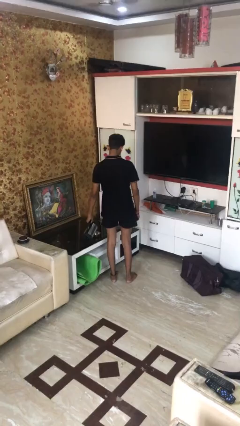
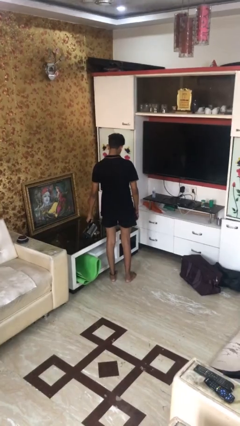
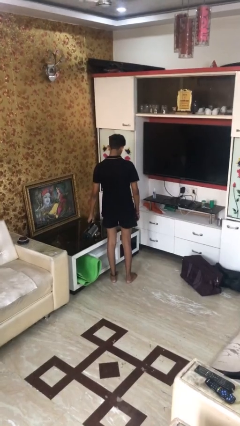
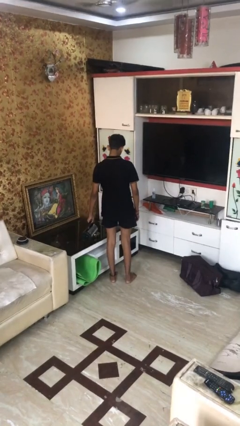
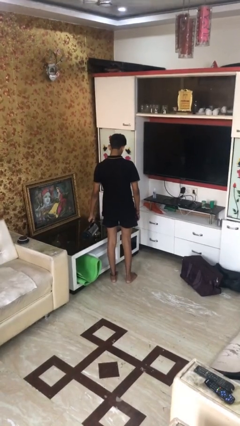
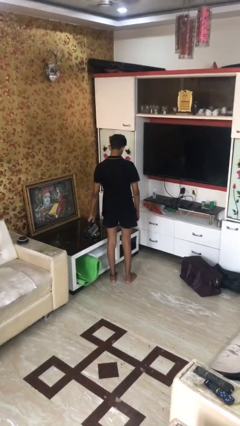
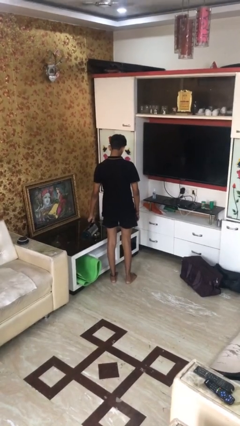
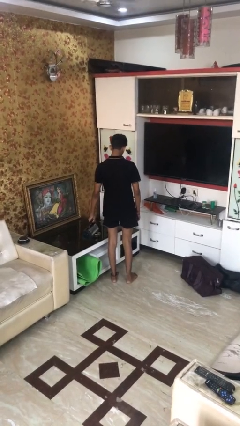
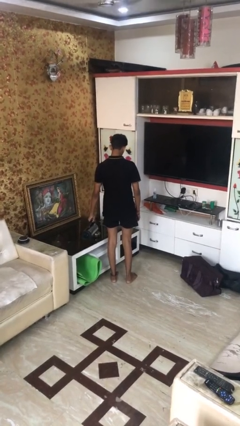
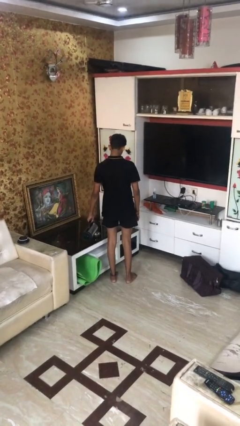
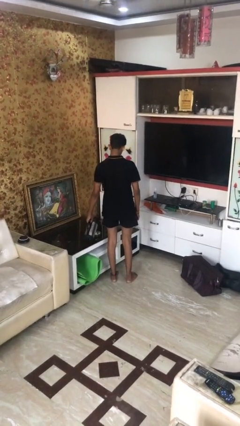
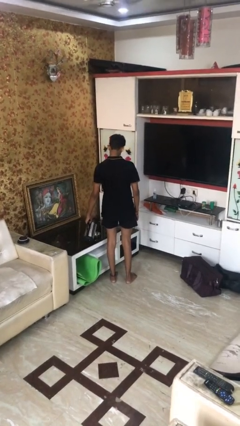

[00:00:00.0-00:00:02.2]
person pours into bowl

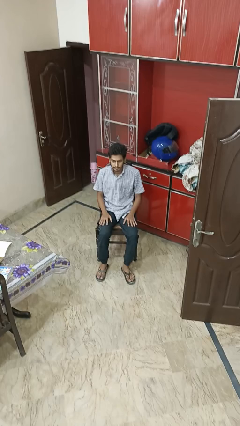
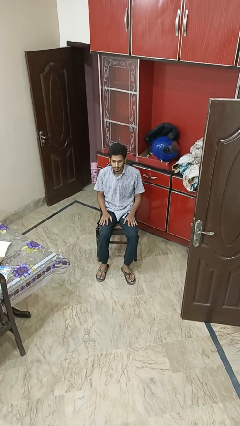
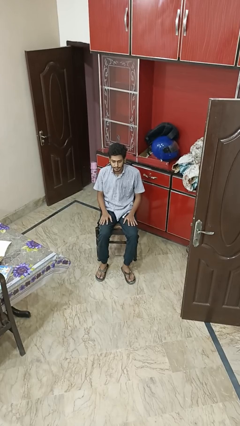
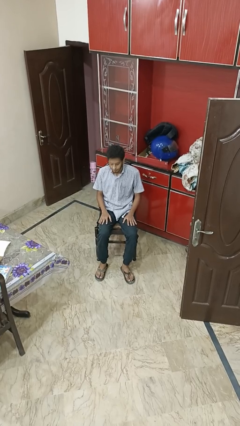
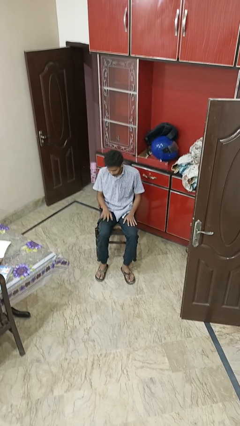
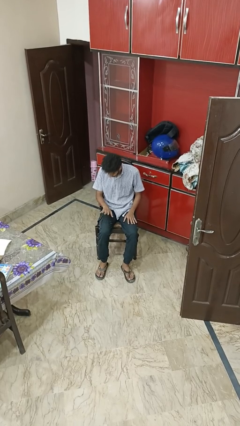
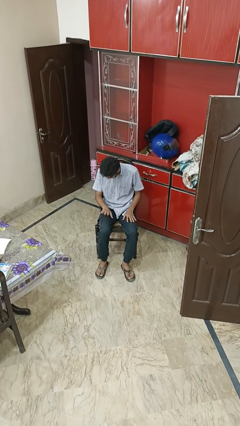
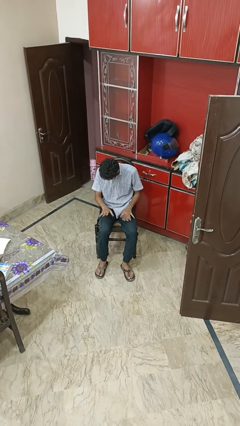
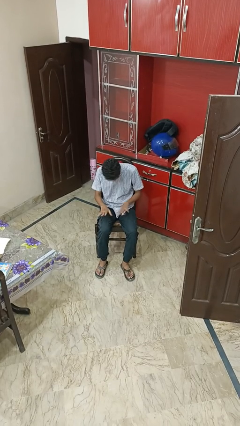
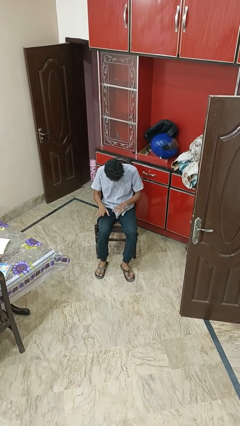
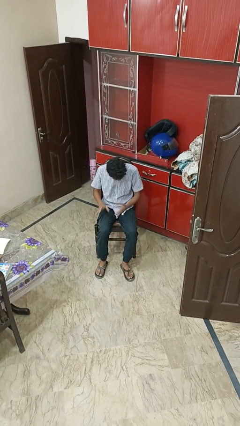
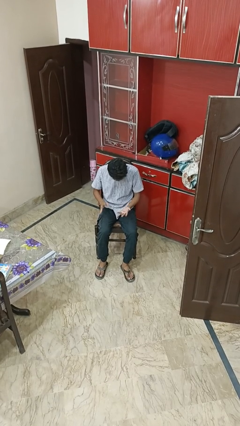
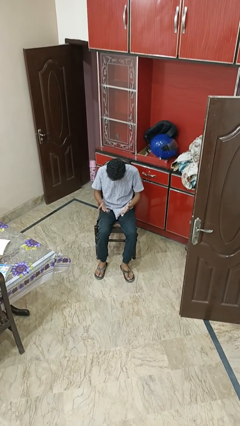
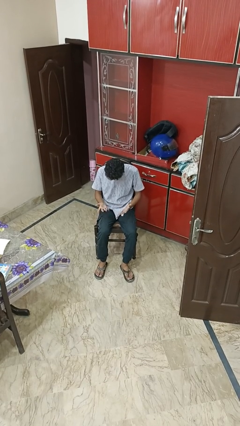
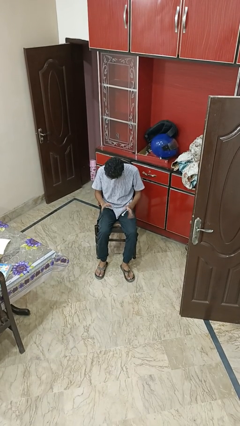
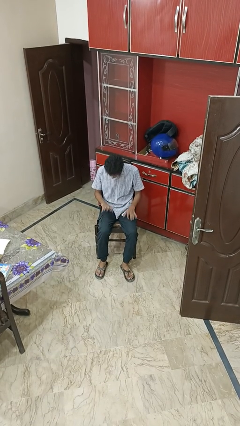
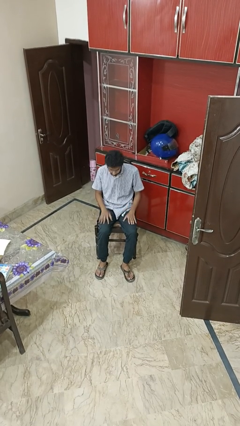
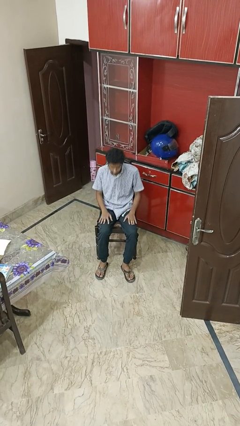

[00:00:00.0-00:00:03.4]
person looks at hands in lap

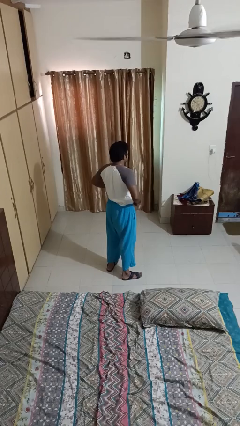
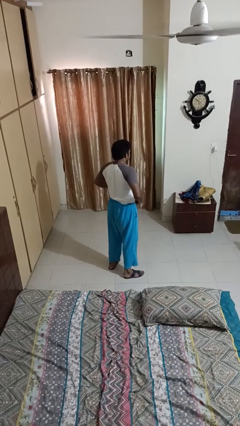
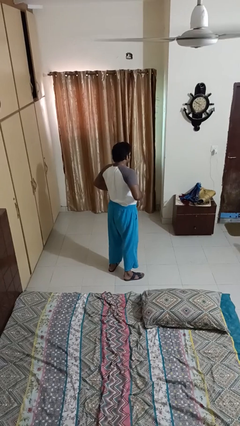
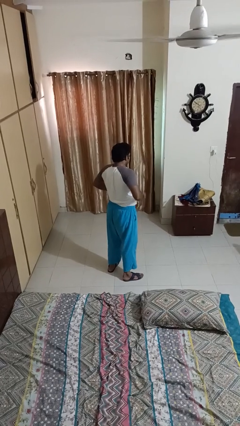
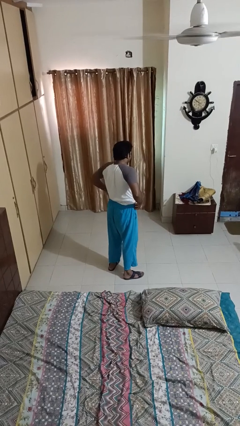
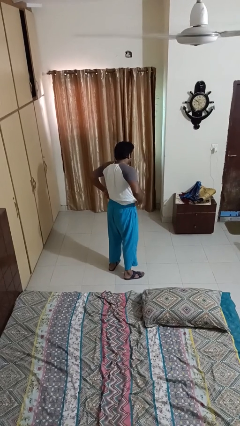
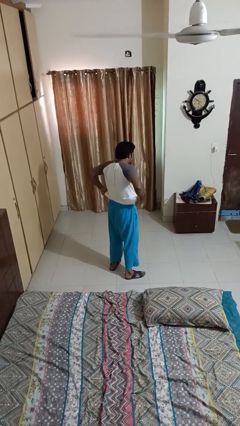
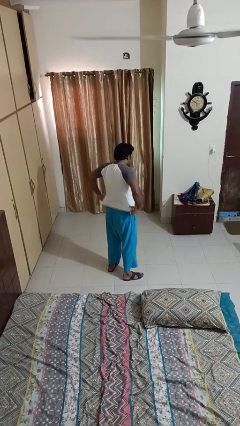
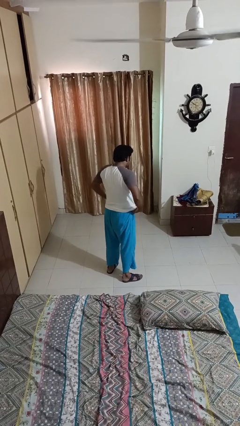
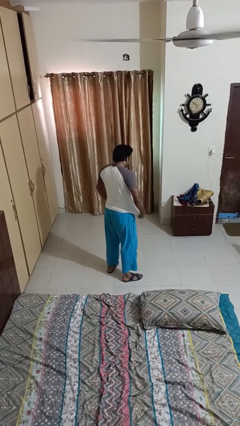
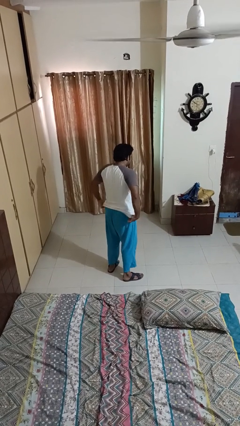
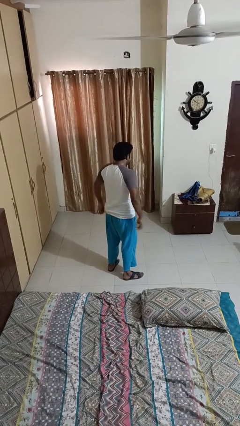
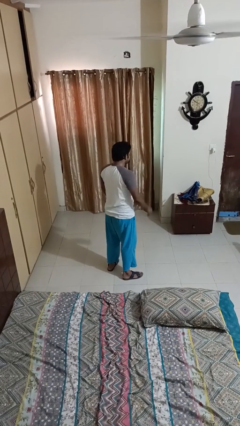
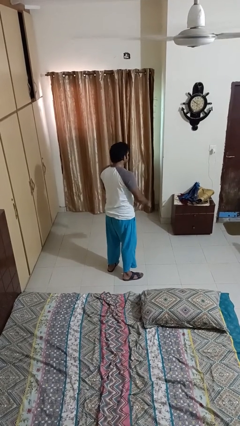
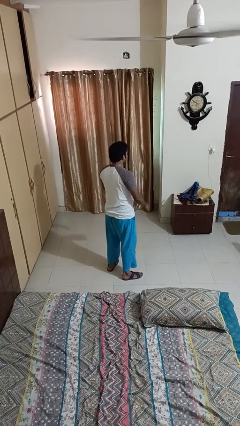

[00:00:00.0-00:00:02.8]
person untucks shirt

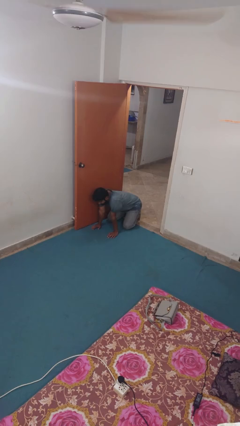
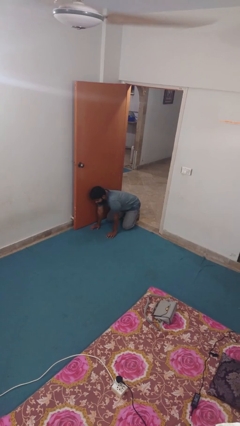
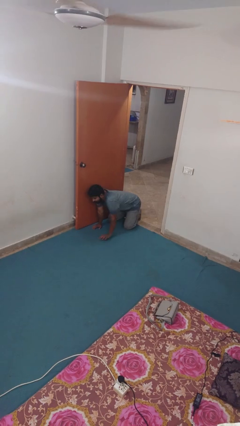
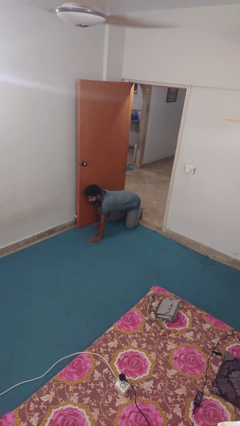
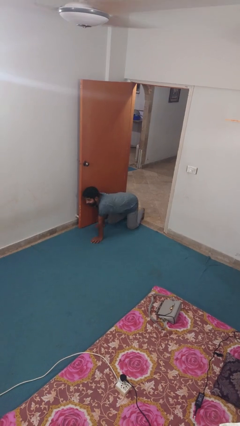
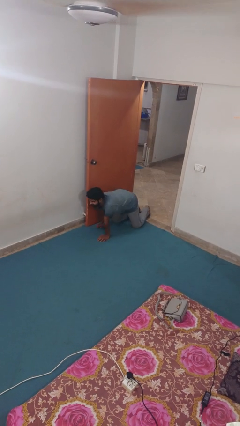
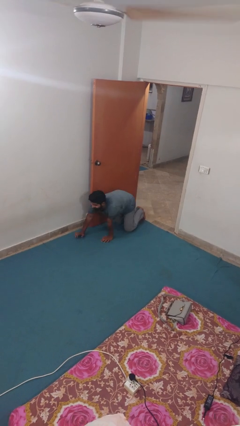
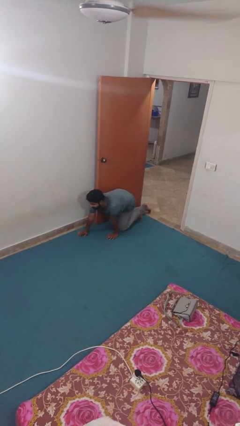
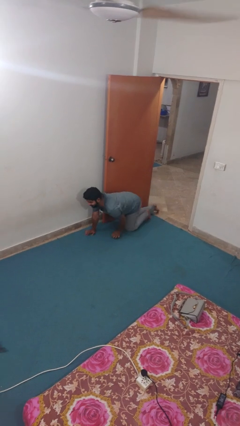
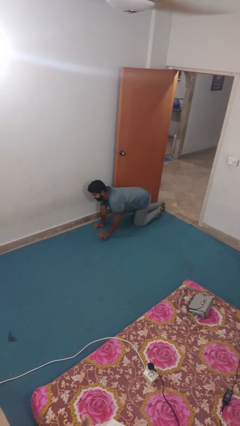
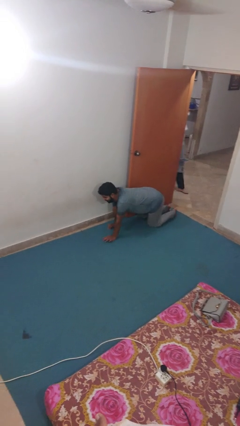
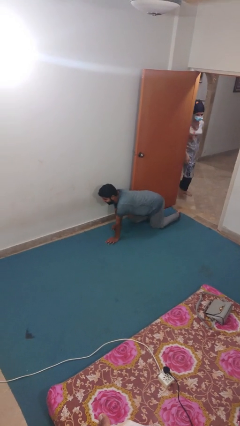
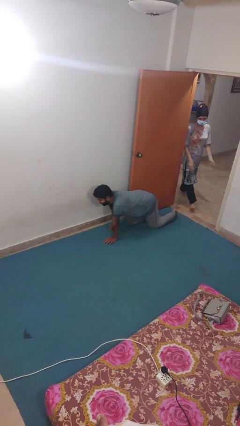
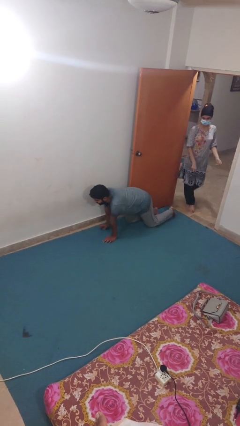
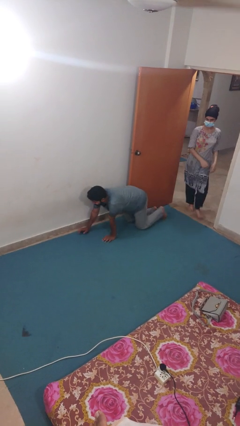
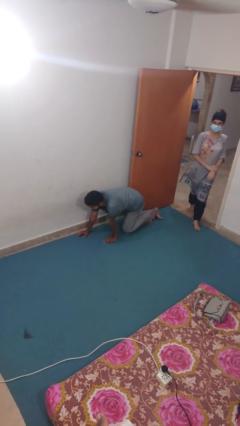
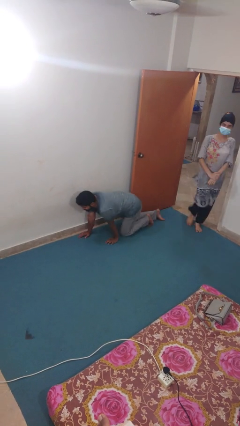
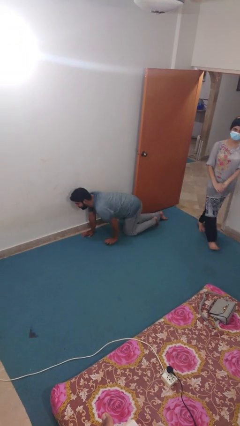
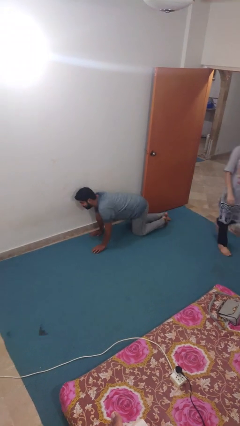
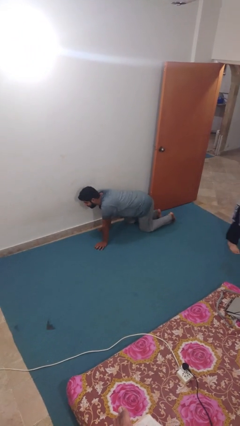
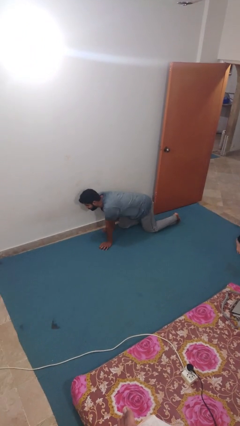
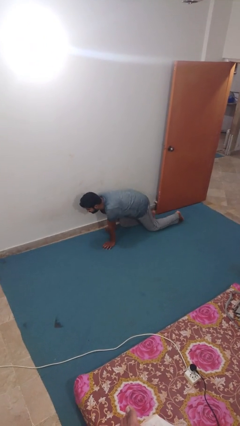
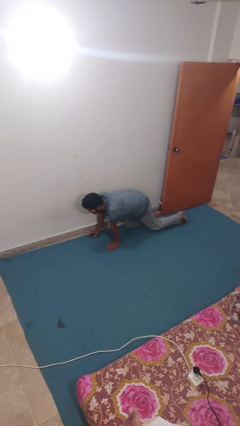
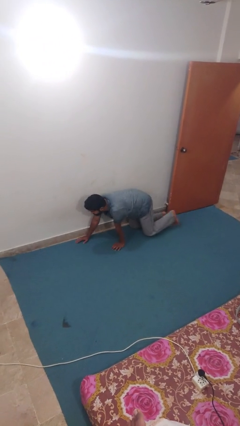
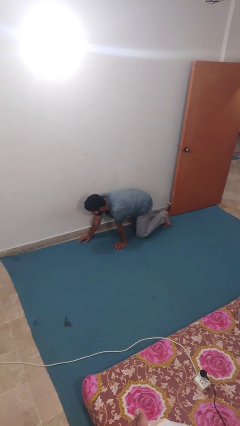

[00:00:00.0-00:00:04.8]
person crawls

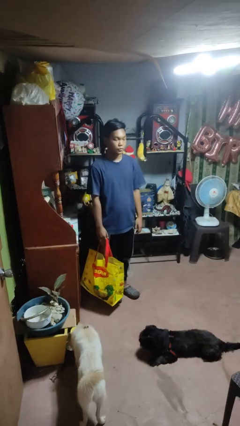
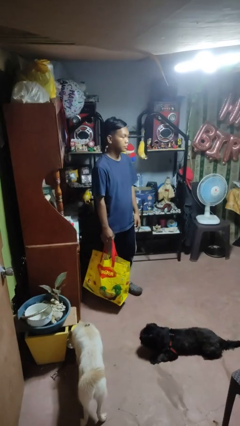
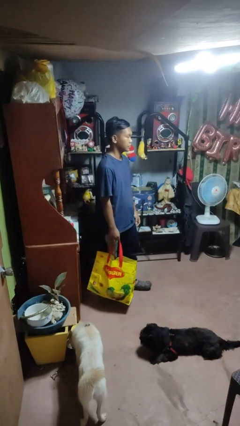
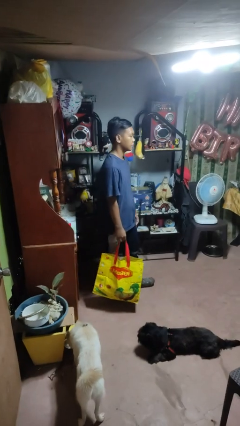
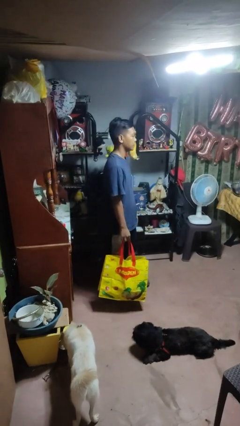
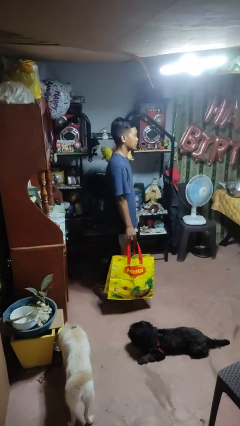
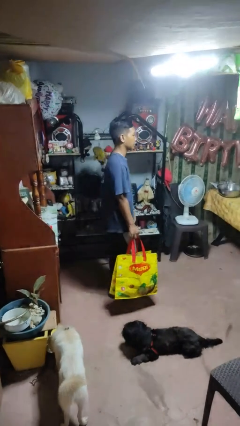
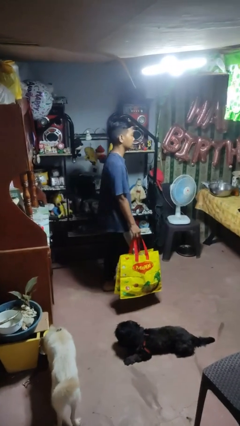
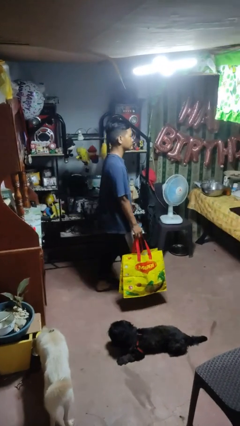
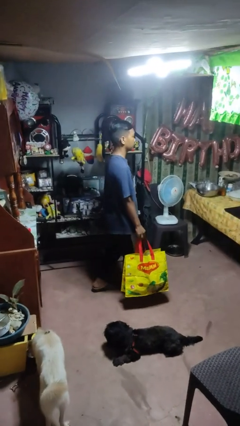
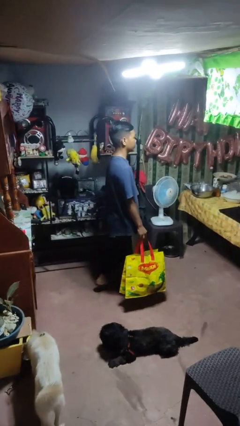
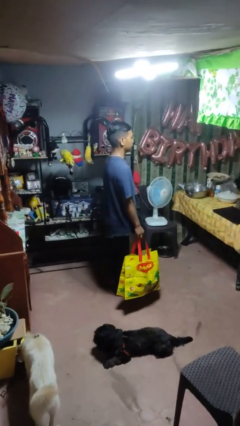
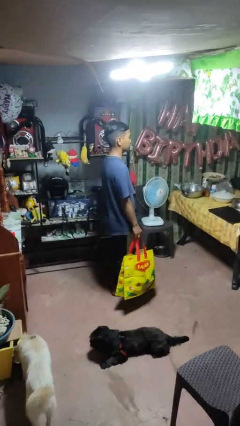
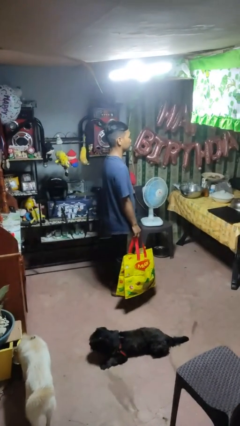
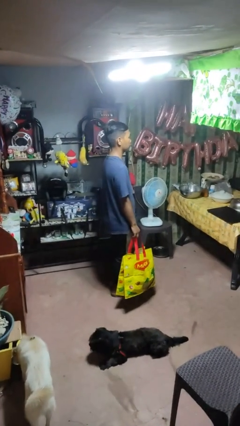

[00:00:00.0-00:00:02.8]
person carries groceries

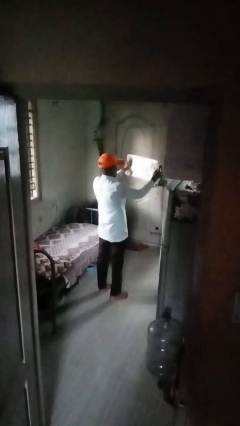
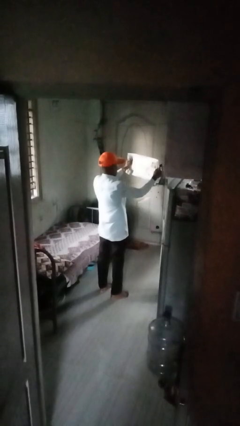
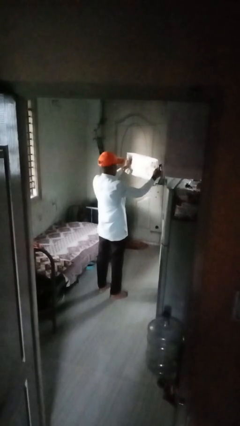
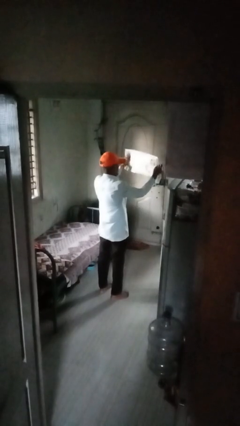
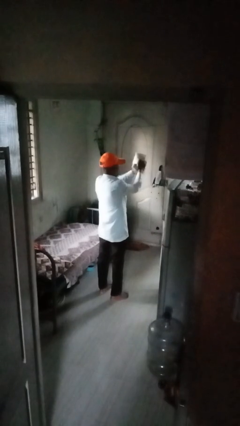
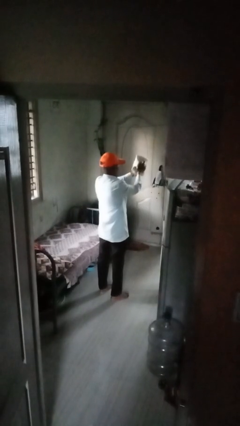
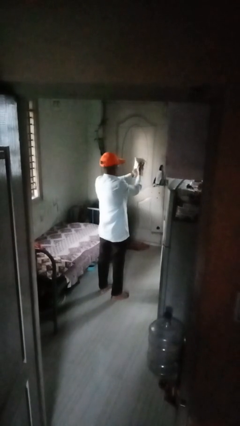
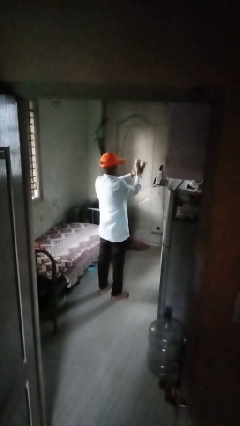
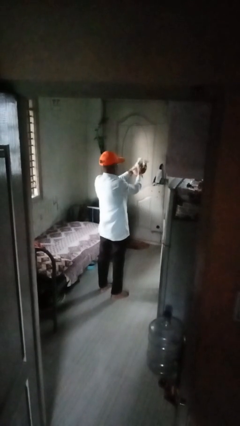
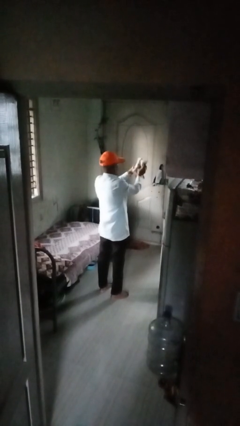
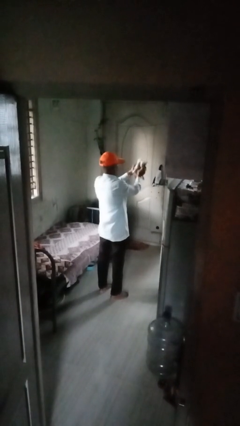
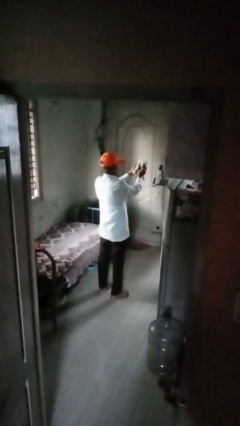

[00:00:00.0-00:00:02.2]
person crumples paper
